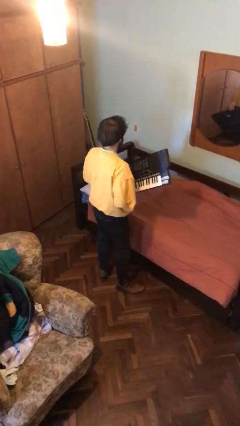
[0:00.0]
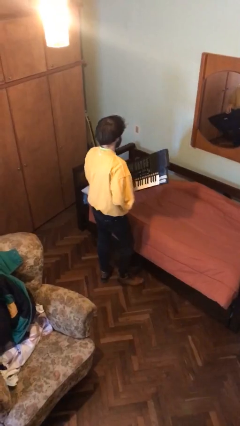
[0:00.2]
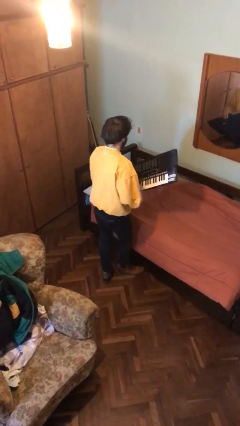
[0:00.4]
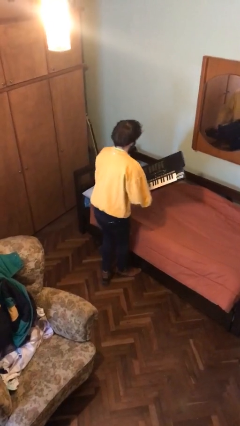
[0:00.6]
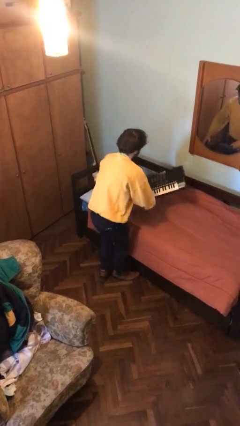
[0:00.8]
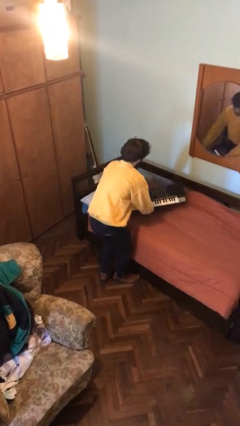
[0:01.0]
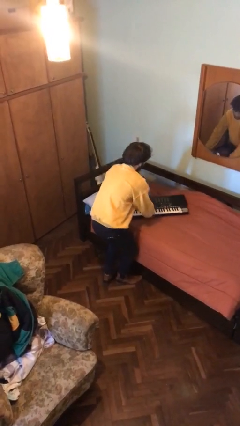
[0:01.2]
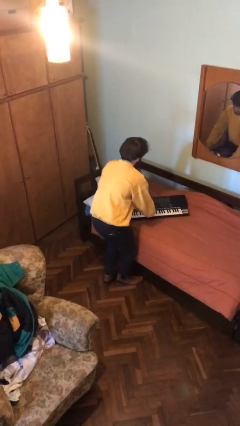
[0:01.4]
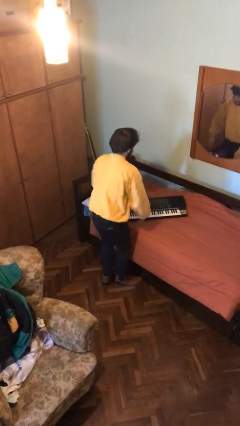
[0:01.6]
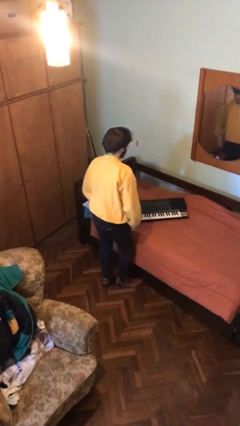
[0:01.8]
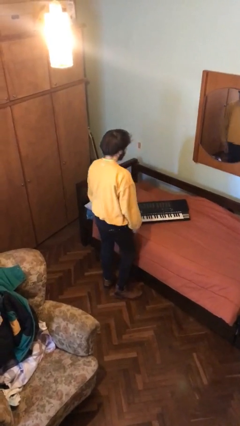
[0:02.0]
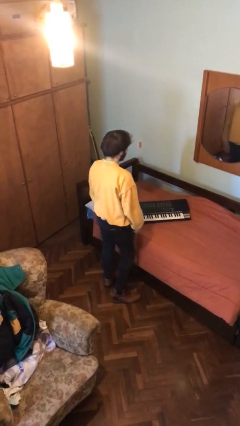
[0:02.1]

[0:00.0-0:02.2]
person puts down object on bed

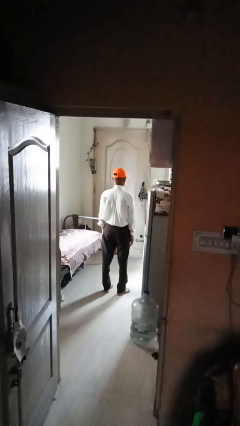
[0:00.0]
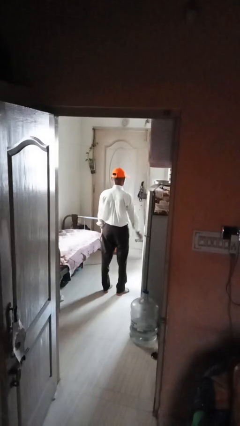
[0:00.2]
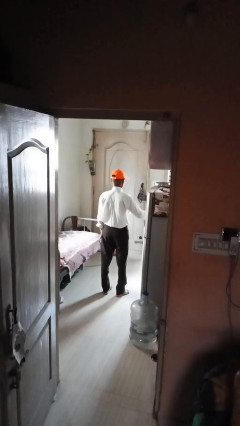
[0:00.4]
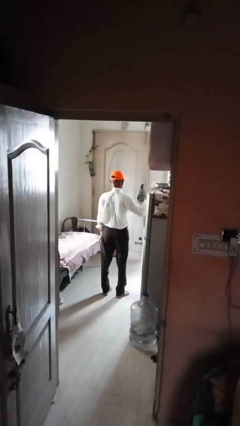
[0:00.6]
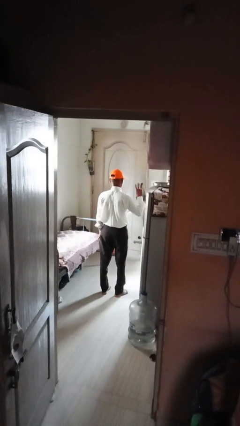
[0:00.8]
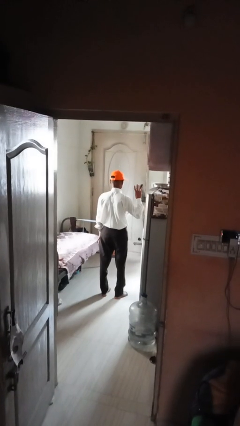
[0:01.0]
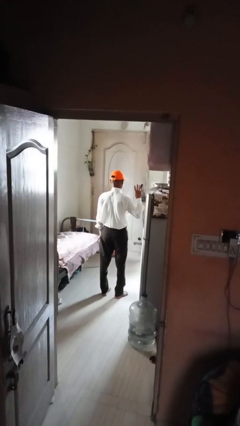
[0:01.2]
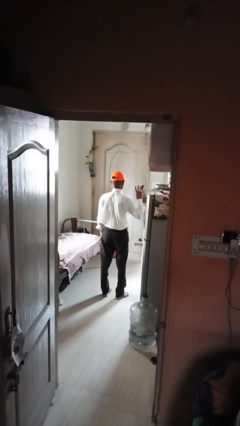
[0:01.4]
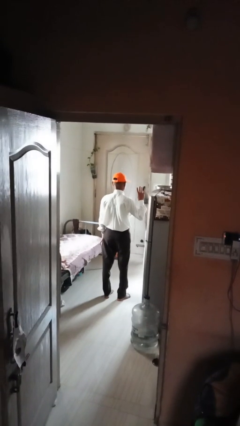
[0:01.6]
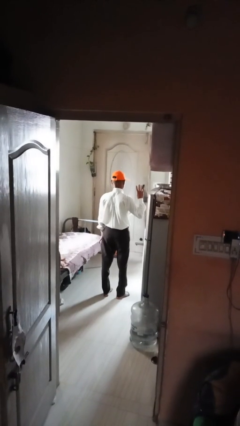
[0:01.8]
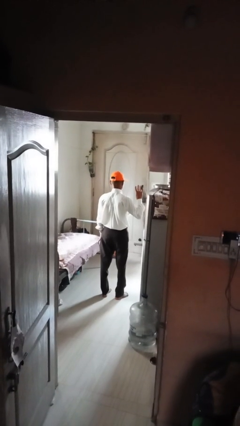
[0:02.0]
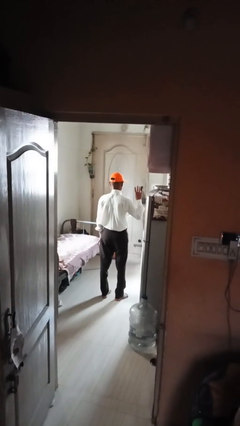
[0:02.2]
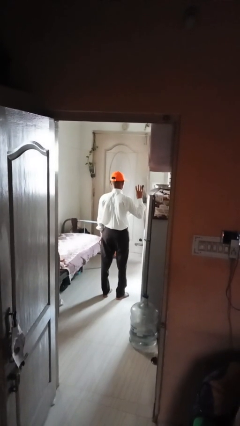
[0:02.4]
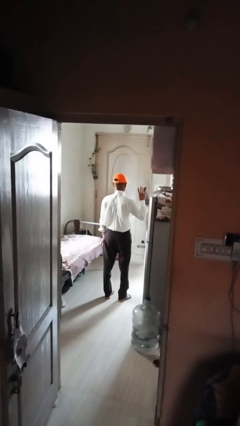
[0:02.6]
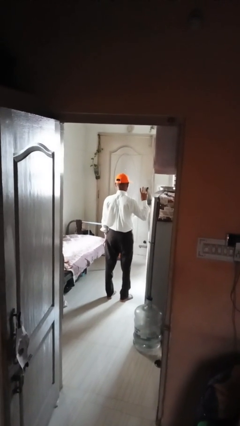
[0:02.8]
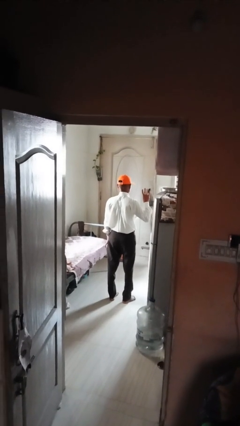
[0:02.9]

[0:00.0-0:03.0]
person gestures number four

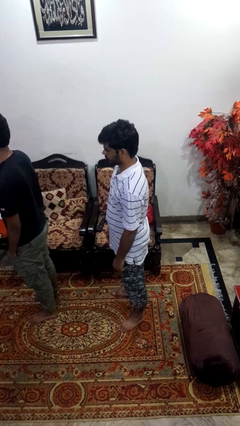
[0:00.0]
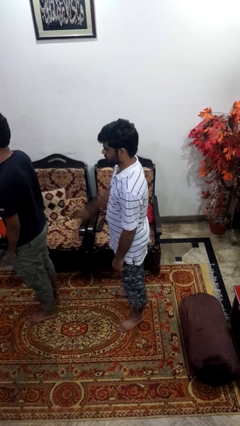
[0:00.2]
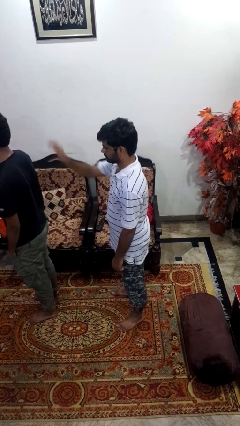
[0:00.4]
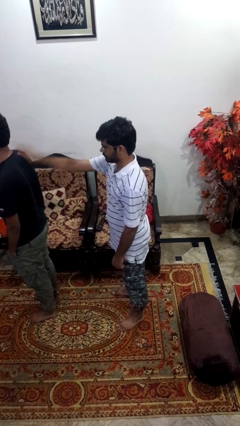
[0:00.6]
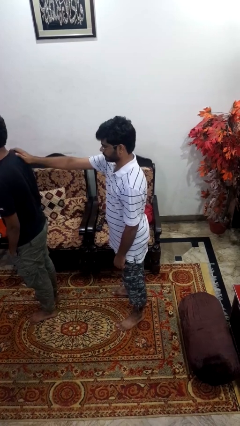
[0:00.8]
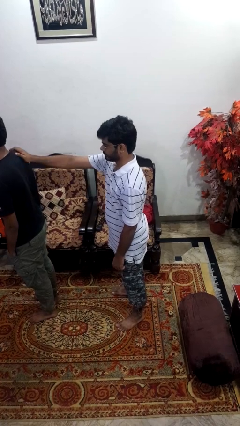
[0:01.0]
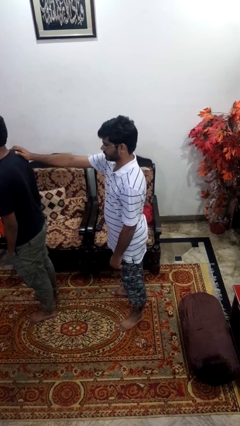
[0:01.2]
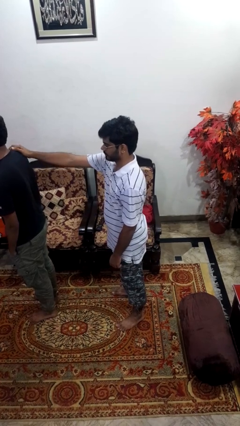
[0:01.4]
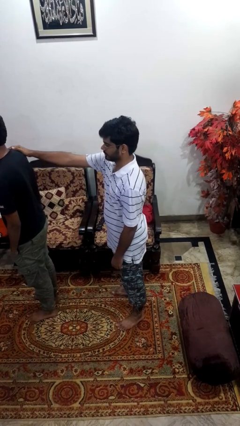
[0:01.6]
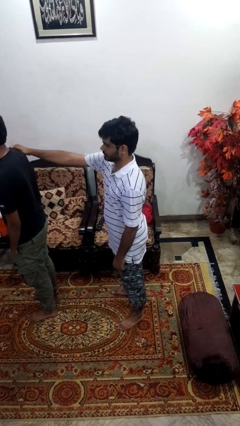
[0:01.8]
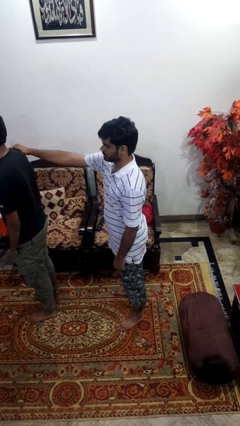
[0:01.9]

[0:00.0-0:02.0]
person grabs person by shoulder

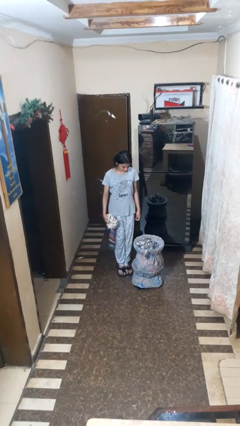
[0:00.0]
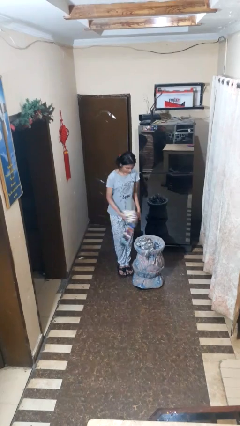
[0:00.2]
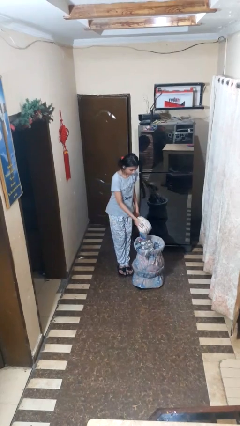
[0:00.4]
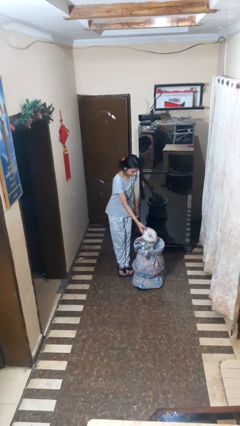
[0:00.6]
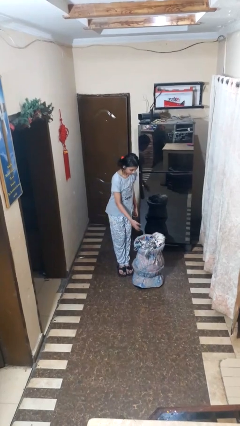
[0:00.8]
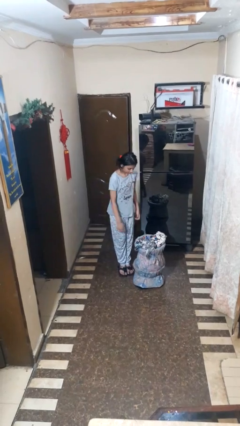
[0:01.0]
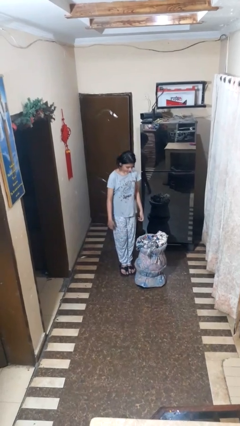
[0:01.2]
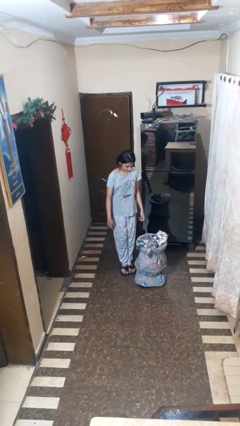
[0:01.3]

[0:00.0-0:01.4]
person takes object from basket

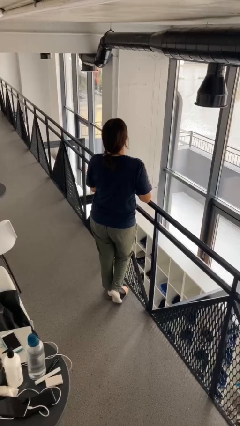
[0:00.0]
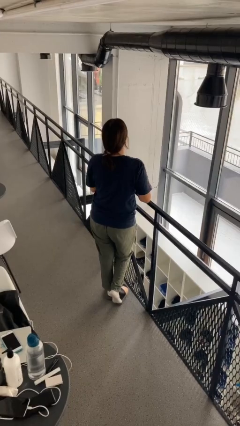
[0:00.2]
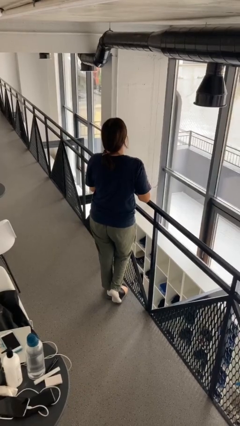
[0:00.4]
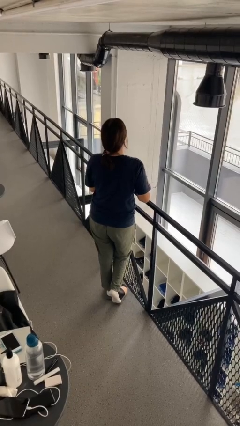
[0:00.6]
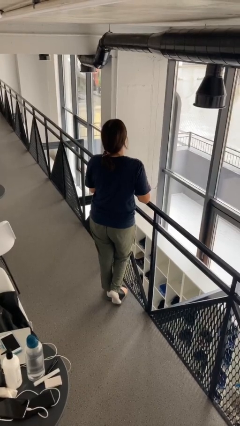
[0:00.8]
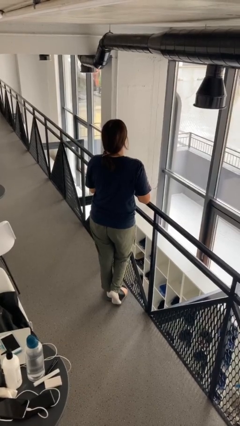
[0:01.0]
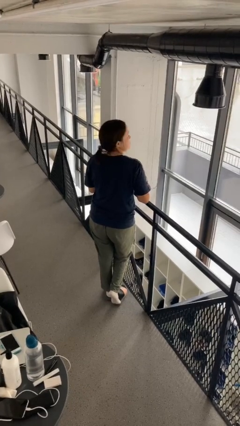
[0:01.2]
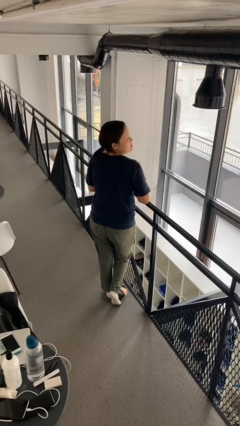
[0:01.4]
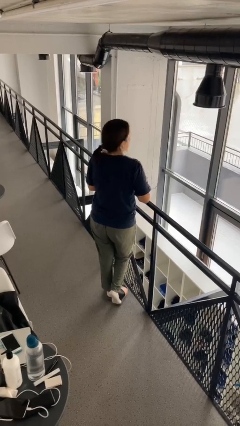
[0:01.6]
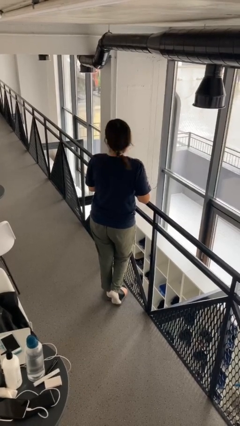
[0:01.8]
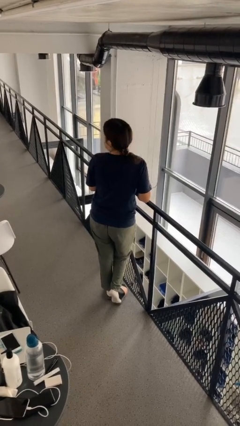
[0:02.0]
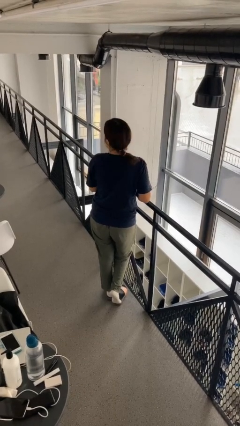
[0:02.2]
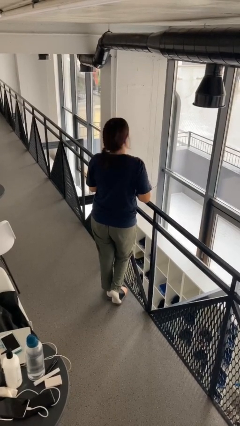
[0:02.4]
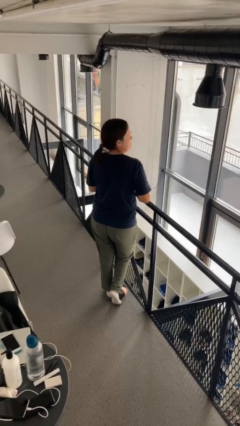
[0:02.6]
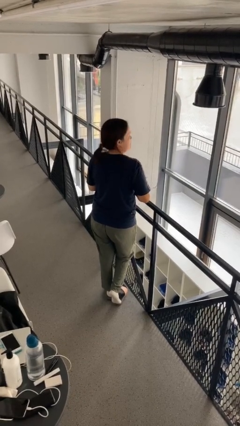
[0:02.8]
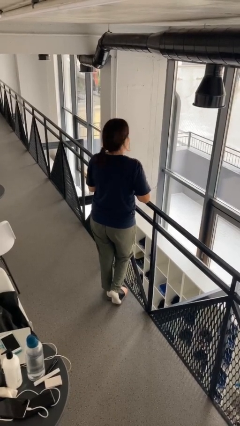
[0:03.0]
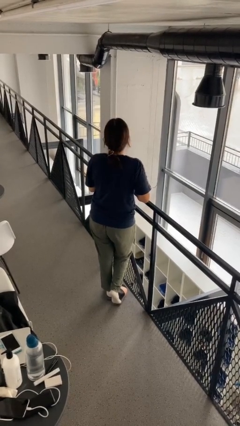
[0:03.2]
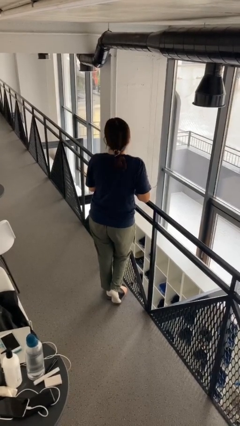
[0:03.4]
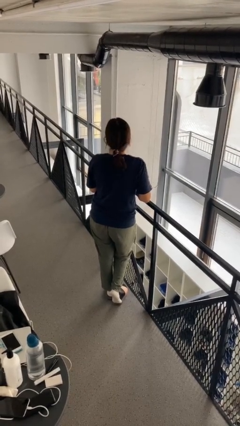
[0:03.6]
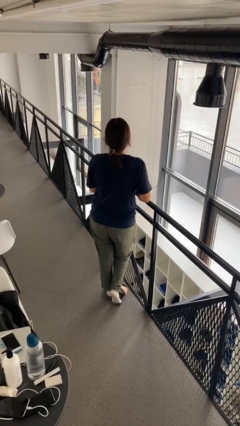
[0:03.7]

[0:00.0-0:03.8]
person shakes head

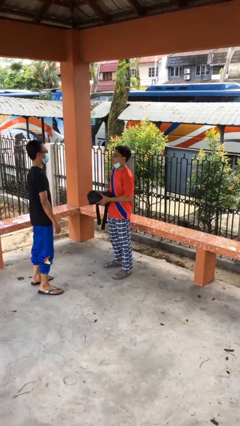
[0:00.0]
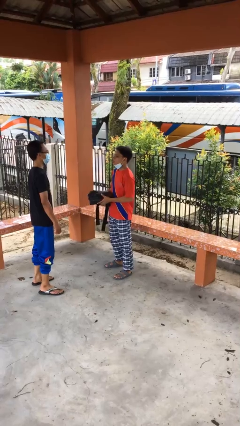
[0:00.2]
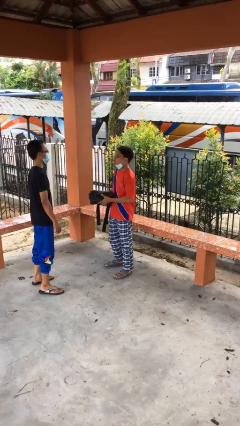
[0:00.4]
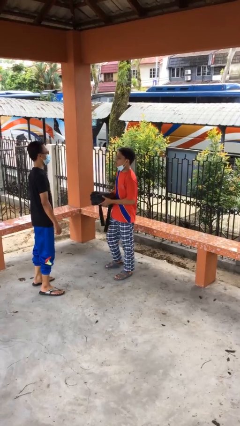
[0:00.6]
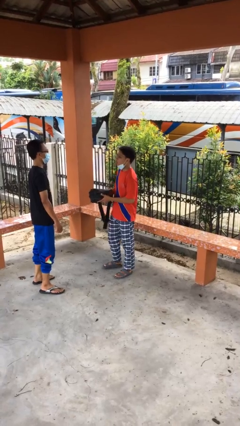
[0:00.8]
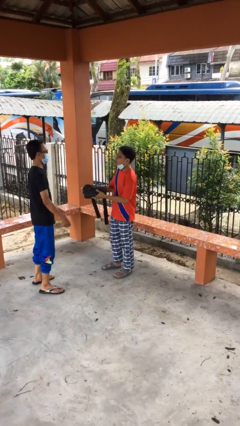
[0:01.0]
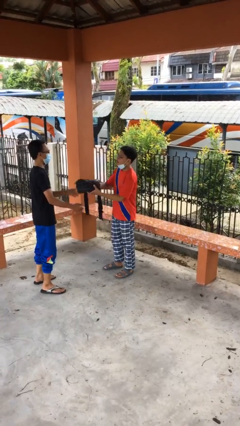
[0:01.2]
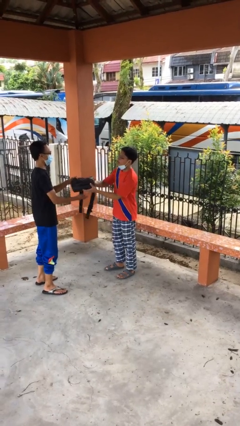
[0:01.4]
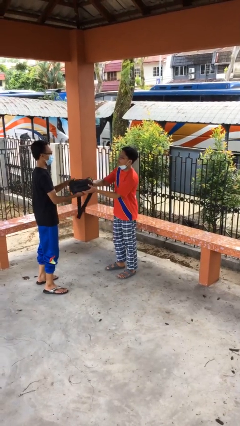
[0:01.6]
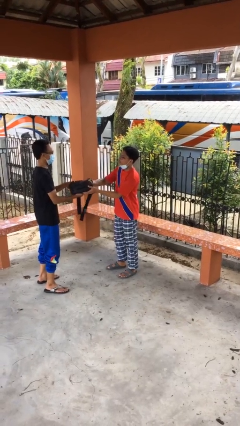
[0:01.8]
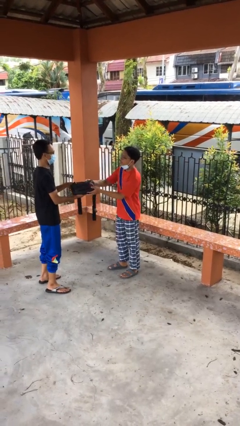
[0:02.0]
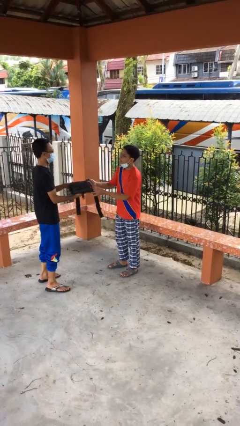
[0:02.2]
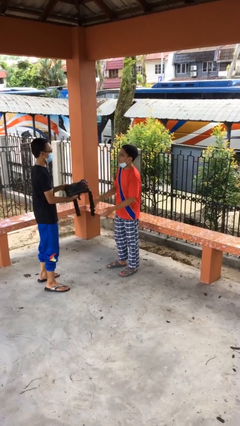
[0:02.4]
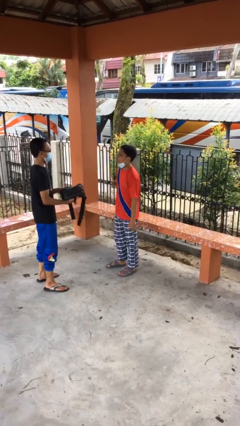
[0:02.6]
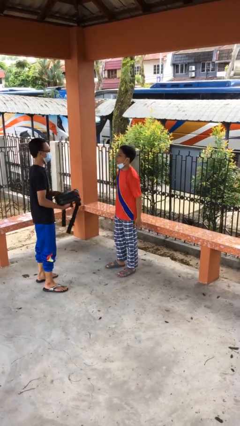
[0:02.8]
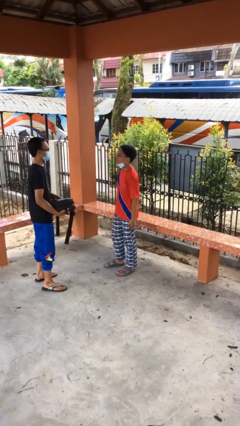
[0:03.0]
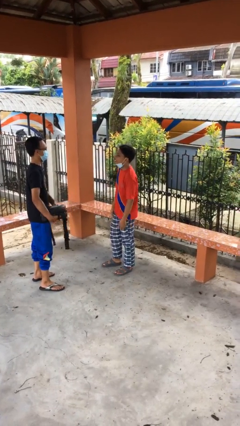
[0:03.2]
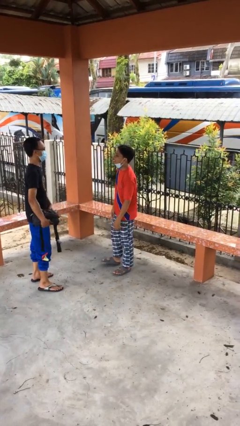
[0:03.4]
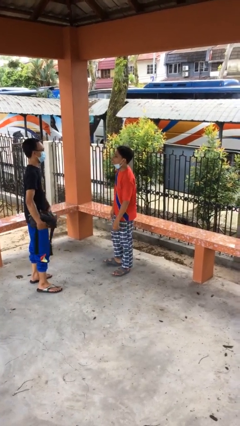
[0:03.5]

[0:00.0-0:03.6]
person transfers object to person

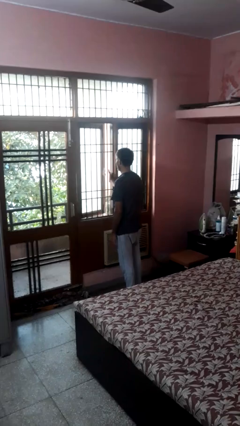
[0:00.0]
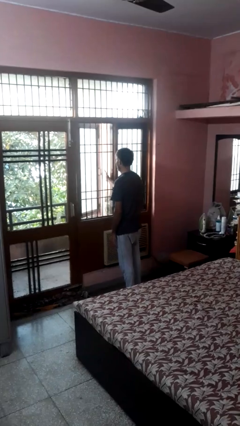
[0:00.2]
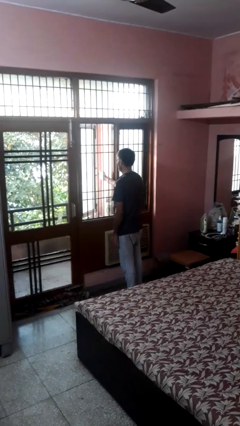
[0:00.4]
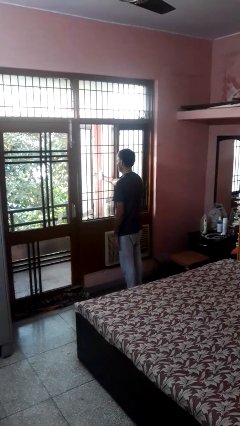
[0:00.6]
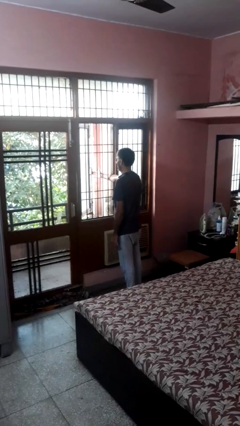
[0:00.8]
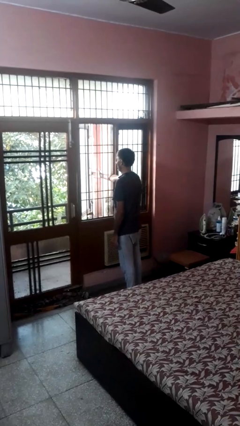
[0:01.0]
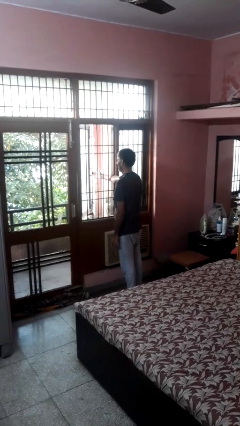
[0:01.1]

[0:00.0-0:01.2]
person opens home window
